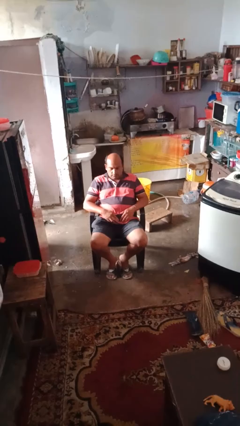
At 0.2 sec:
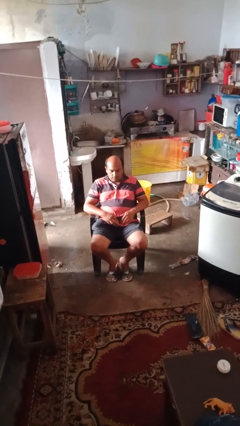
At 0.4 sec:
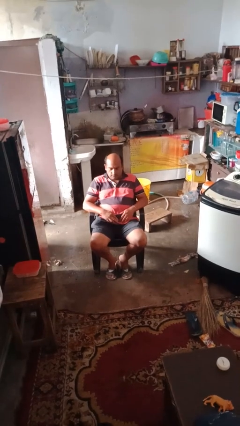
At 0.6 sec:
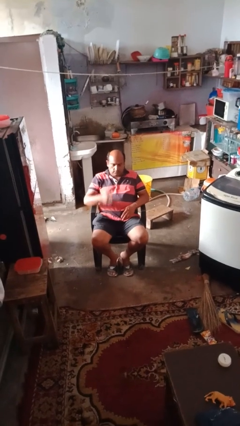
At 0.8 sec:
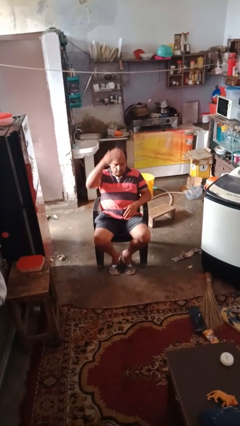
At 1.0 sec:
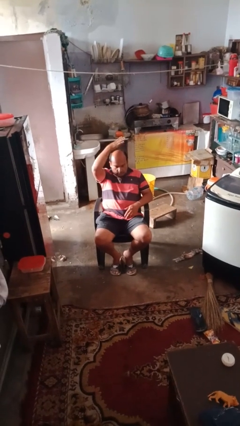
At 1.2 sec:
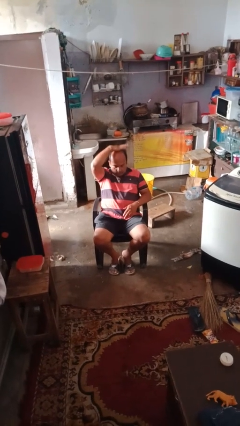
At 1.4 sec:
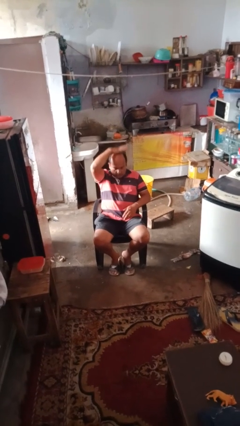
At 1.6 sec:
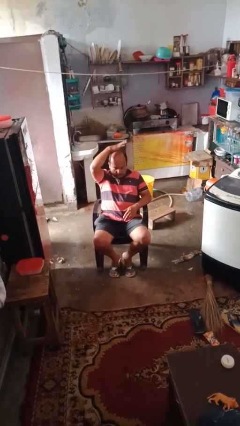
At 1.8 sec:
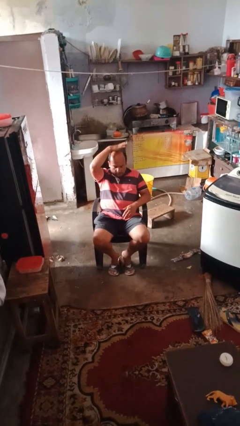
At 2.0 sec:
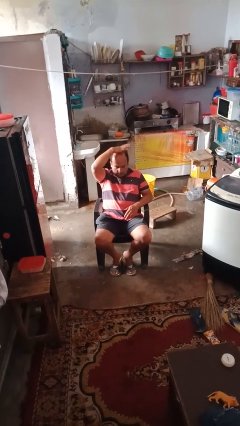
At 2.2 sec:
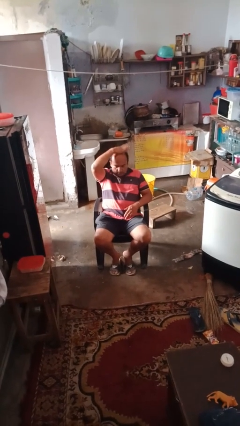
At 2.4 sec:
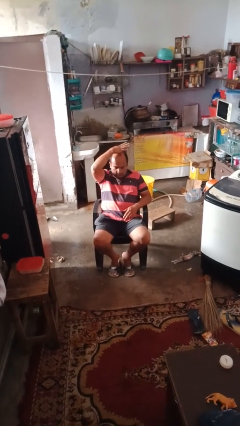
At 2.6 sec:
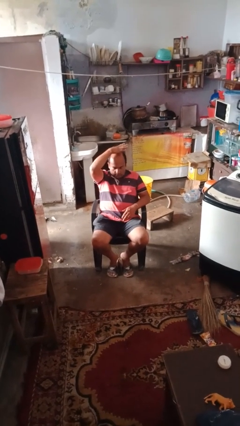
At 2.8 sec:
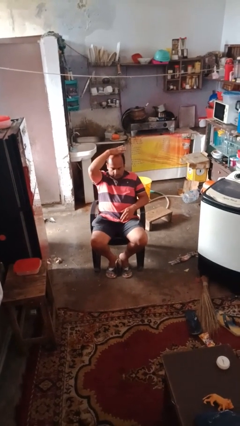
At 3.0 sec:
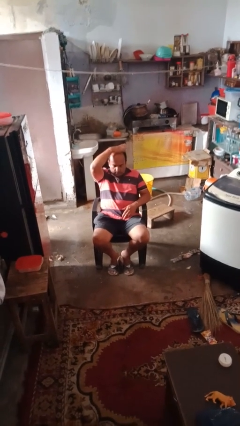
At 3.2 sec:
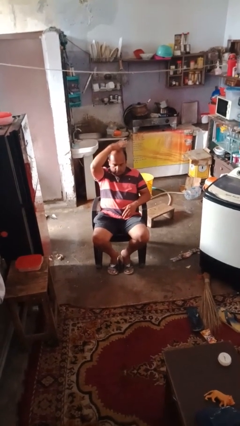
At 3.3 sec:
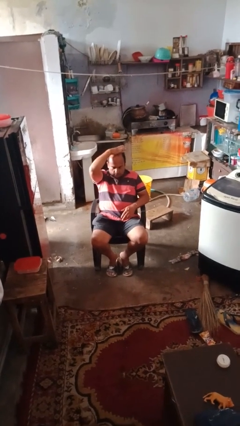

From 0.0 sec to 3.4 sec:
person holds object above head

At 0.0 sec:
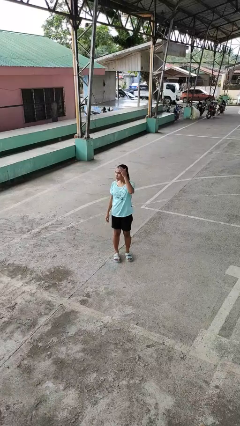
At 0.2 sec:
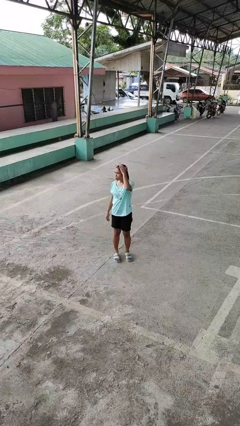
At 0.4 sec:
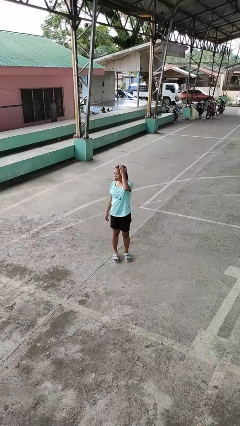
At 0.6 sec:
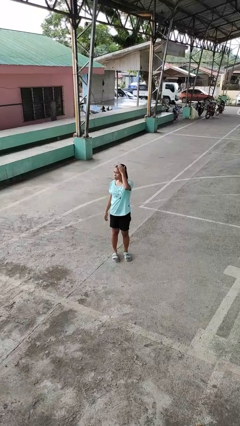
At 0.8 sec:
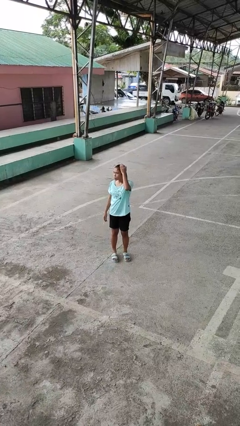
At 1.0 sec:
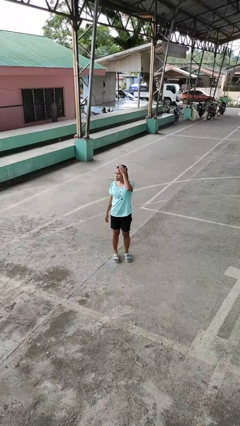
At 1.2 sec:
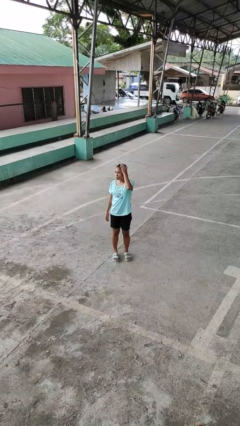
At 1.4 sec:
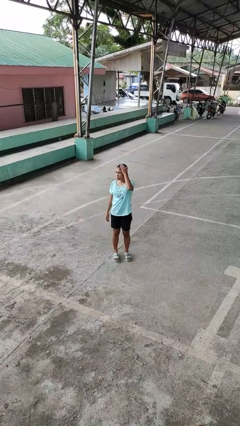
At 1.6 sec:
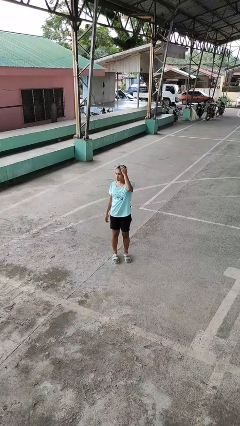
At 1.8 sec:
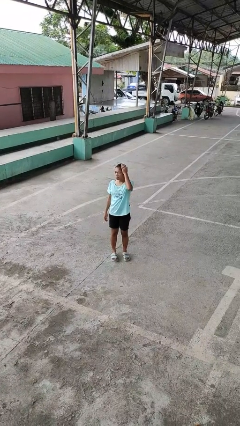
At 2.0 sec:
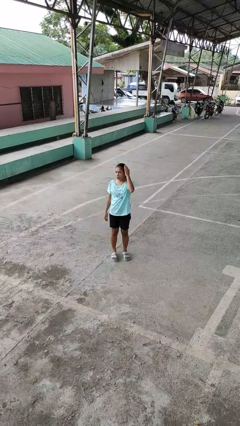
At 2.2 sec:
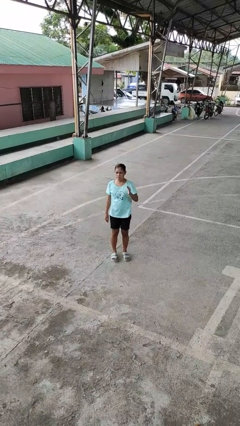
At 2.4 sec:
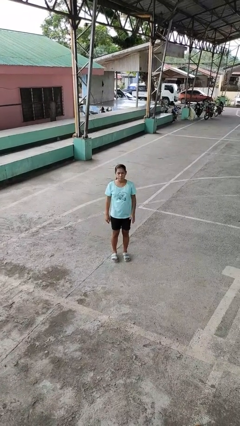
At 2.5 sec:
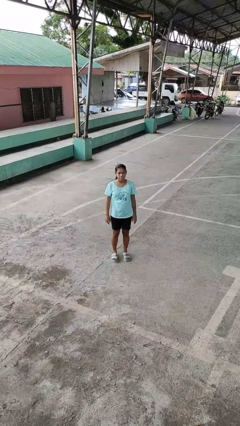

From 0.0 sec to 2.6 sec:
person pats head

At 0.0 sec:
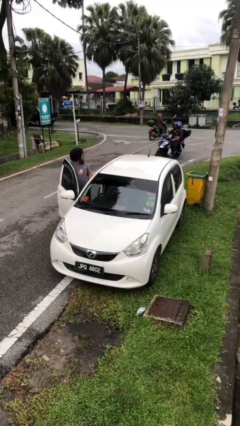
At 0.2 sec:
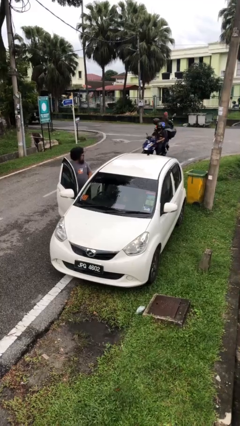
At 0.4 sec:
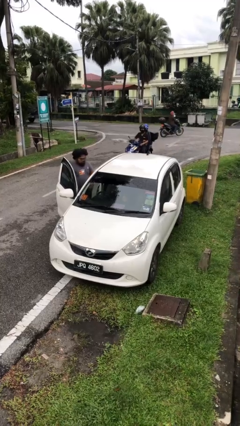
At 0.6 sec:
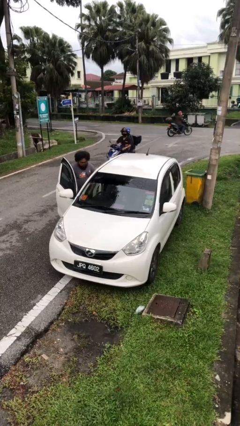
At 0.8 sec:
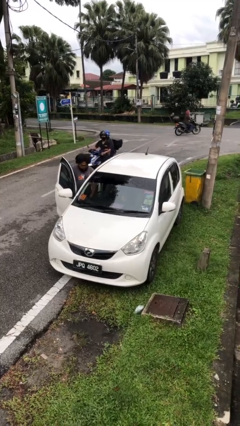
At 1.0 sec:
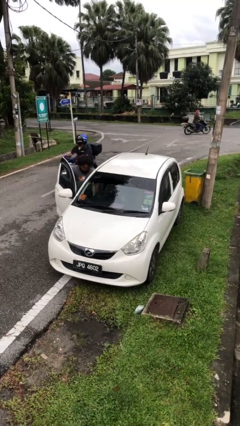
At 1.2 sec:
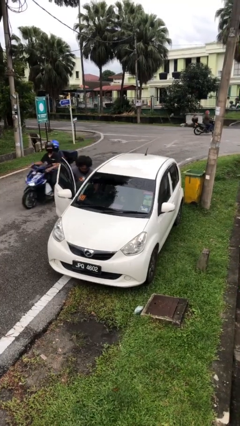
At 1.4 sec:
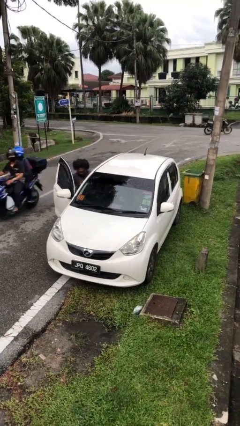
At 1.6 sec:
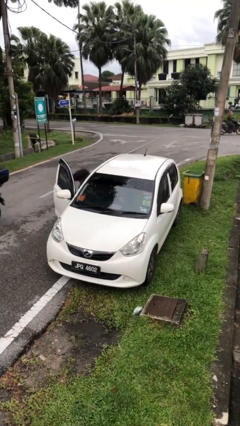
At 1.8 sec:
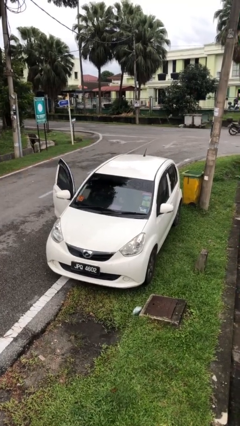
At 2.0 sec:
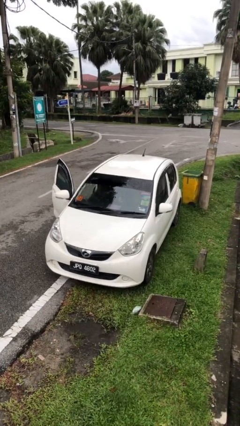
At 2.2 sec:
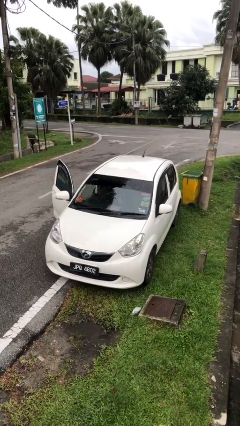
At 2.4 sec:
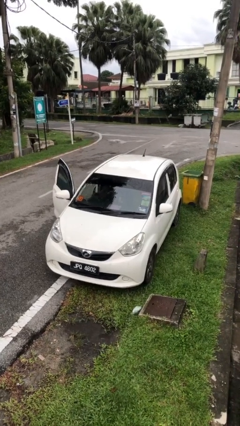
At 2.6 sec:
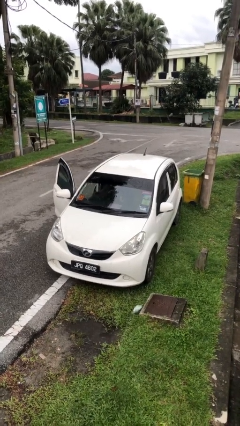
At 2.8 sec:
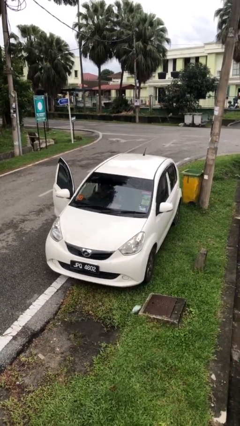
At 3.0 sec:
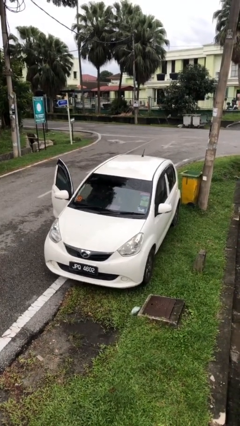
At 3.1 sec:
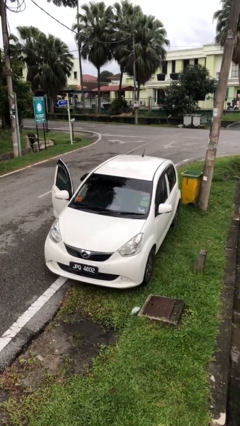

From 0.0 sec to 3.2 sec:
person enters car

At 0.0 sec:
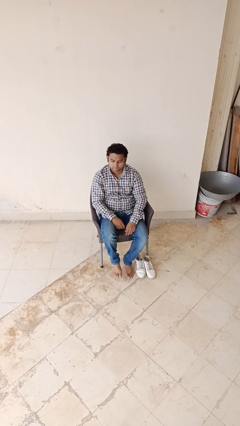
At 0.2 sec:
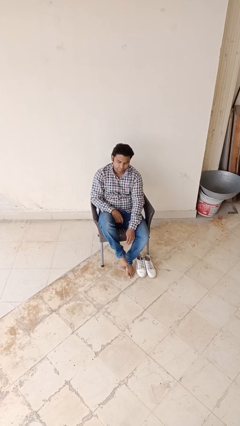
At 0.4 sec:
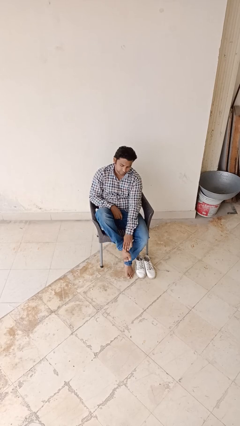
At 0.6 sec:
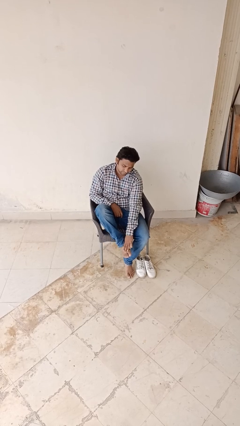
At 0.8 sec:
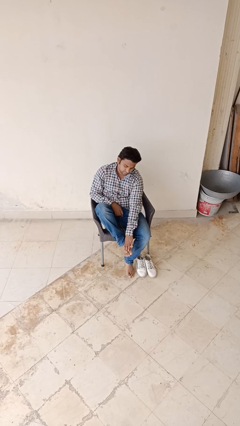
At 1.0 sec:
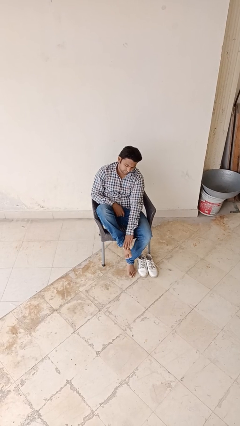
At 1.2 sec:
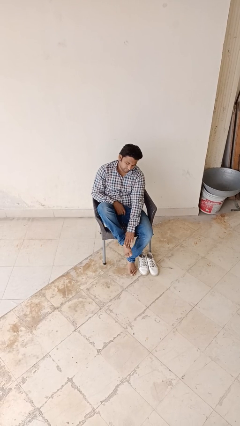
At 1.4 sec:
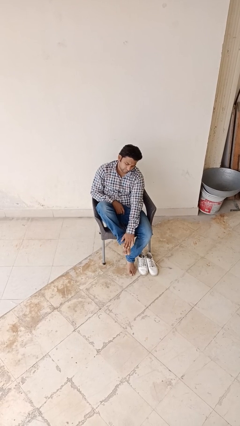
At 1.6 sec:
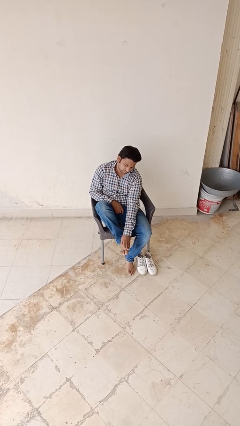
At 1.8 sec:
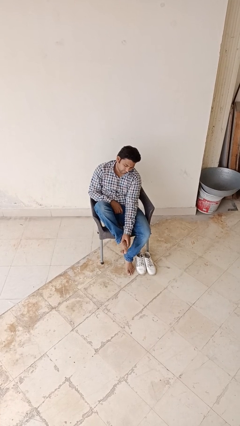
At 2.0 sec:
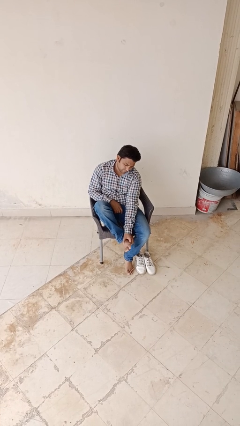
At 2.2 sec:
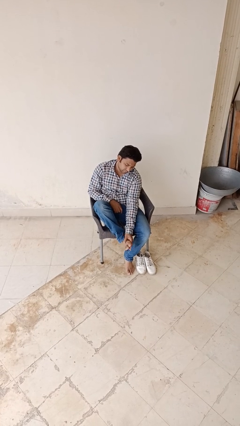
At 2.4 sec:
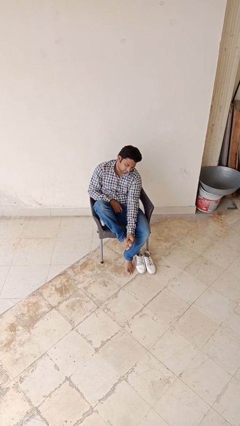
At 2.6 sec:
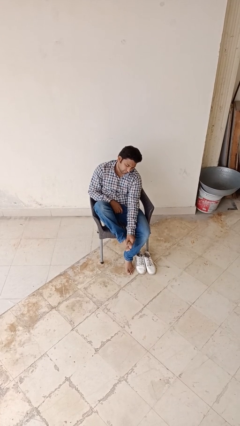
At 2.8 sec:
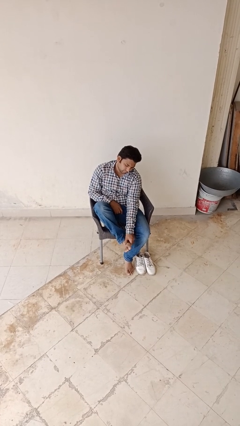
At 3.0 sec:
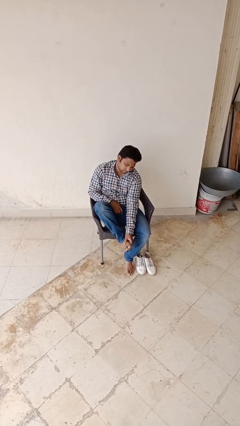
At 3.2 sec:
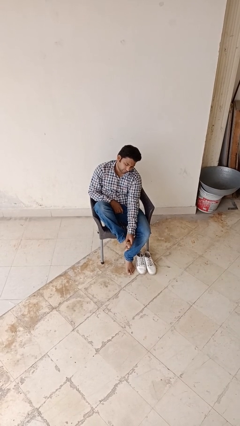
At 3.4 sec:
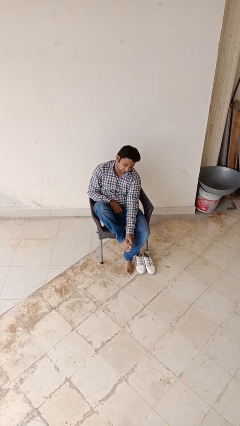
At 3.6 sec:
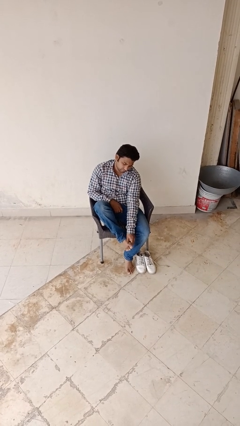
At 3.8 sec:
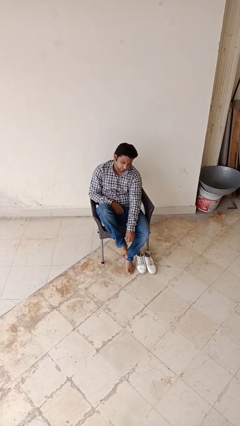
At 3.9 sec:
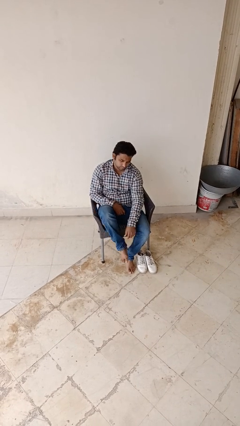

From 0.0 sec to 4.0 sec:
person rubs foot

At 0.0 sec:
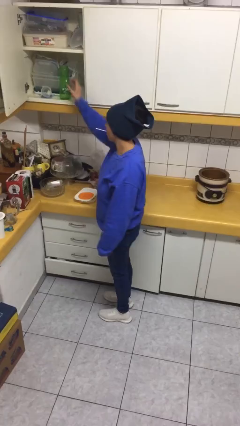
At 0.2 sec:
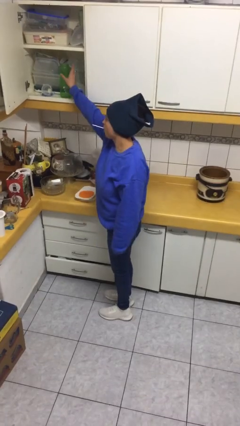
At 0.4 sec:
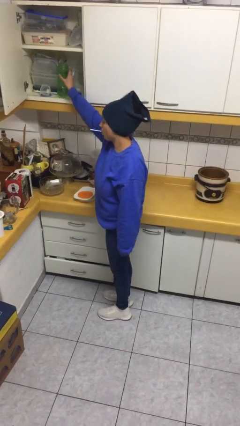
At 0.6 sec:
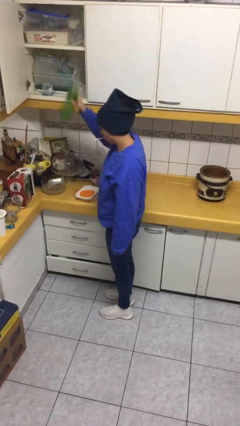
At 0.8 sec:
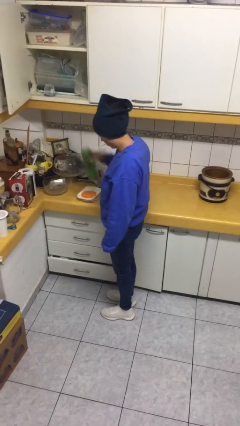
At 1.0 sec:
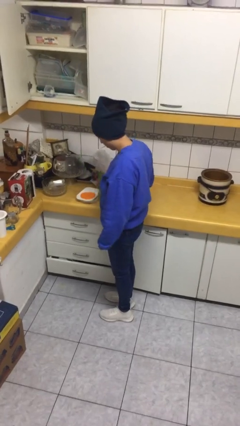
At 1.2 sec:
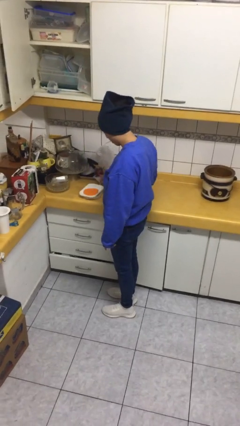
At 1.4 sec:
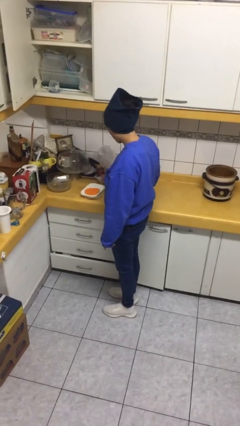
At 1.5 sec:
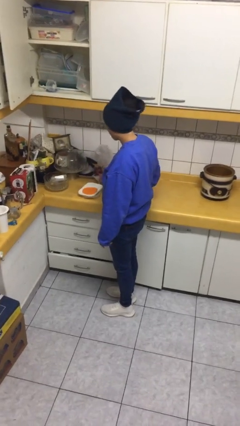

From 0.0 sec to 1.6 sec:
person takes object from cabinet

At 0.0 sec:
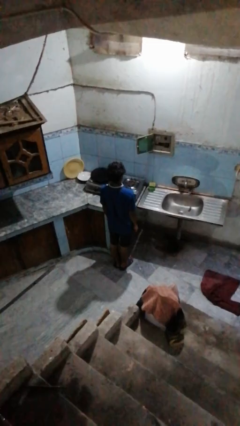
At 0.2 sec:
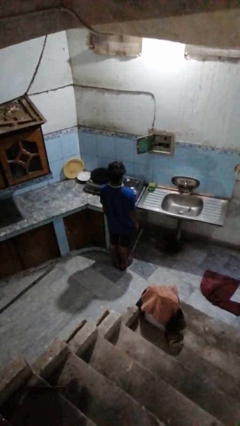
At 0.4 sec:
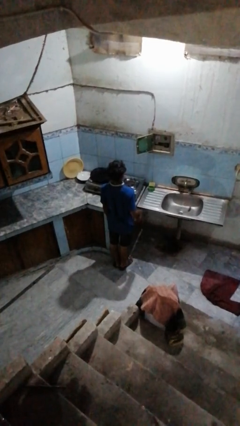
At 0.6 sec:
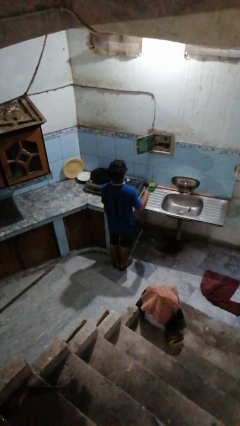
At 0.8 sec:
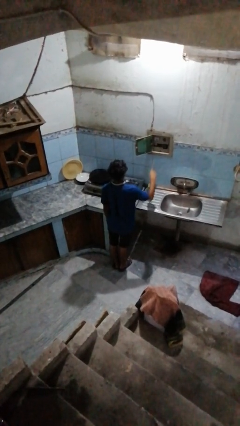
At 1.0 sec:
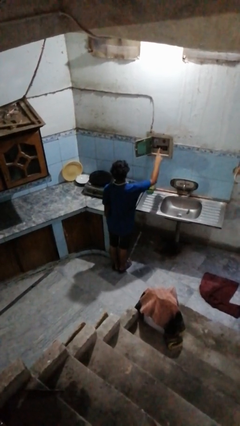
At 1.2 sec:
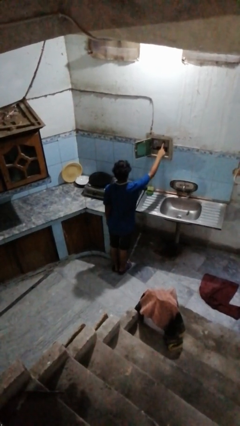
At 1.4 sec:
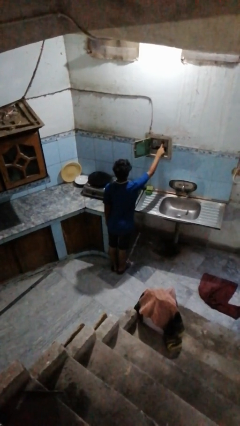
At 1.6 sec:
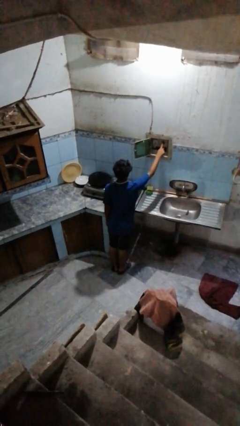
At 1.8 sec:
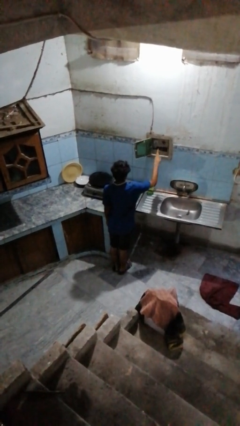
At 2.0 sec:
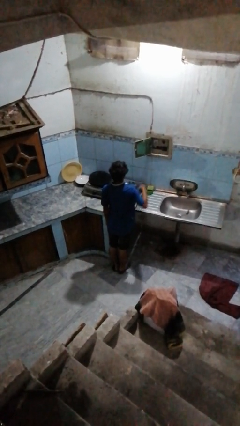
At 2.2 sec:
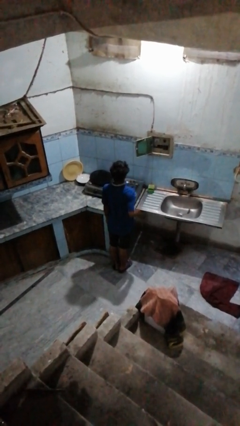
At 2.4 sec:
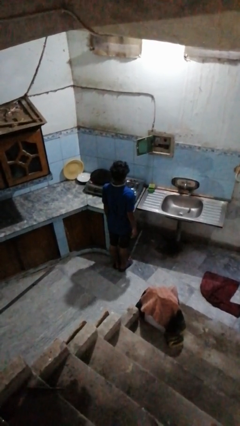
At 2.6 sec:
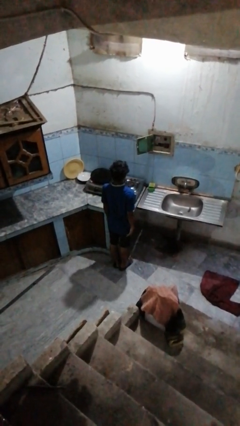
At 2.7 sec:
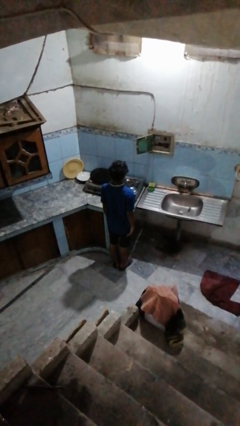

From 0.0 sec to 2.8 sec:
person puts up smoke detector
